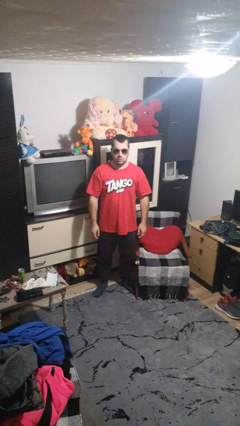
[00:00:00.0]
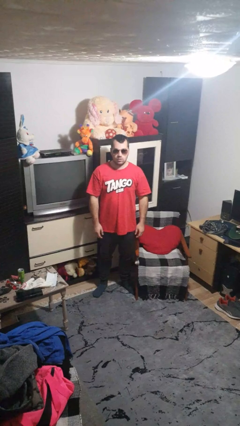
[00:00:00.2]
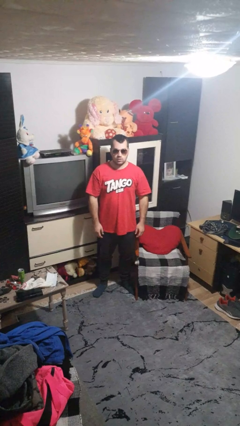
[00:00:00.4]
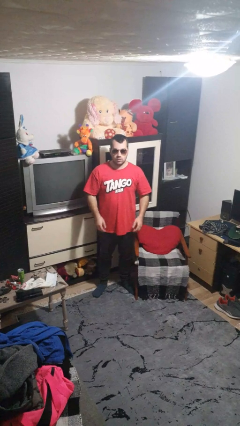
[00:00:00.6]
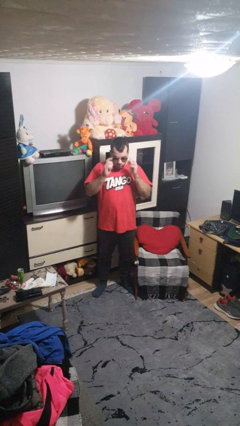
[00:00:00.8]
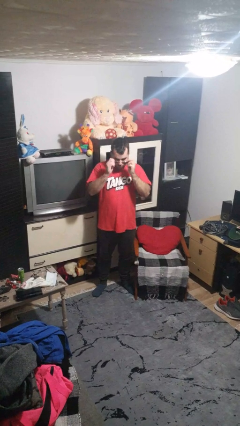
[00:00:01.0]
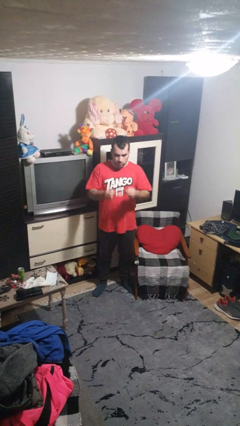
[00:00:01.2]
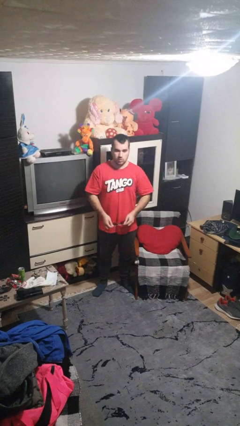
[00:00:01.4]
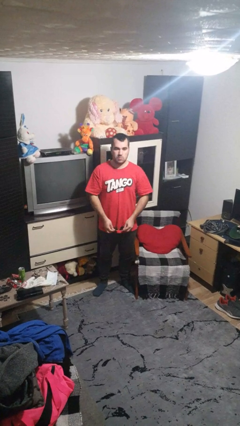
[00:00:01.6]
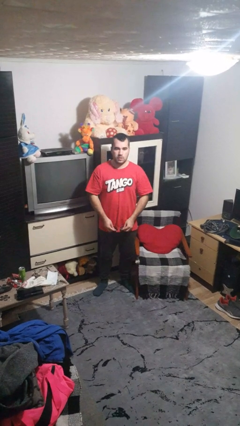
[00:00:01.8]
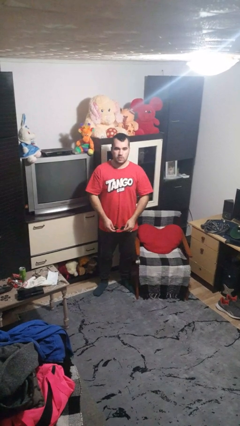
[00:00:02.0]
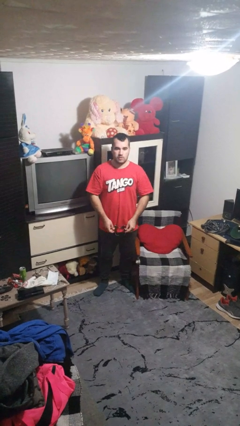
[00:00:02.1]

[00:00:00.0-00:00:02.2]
person takes off sunglasses

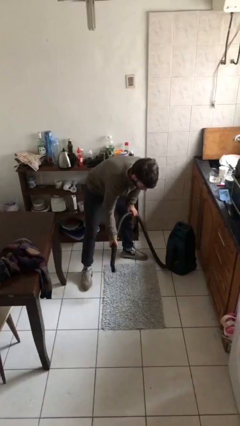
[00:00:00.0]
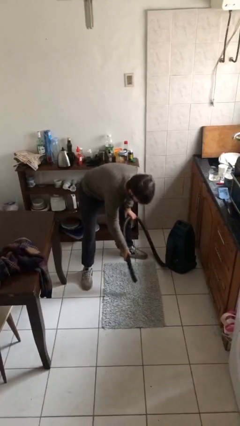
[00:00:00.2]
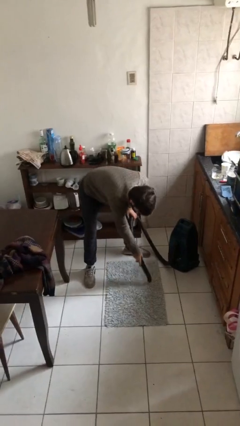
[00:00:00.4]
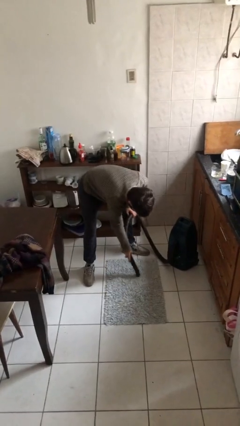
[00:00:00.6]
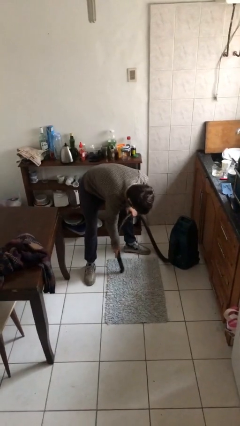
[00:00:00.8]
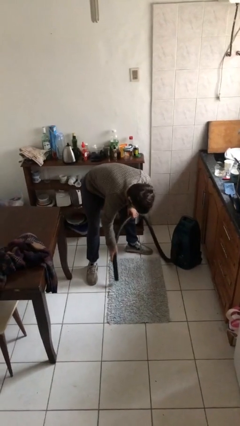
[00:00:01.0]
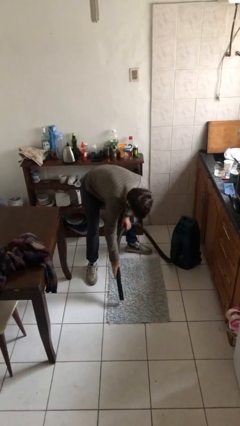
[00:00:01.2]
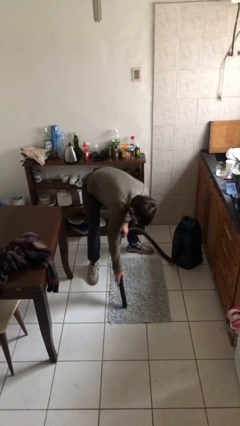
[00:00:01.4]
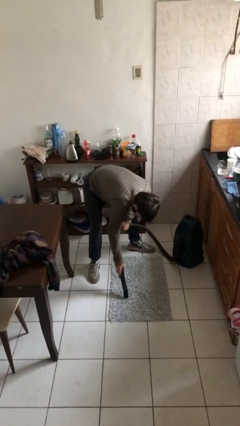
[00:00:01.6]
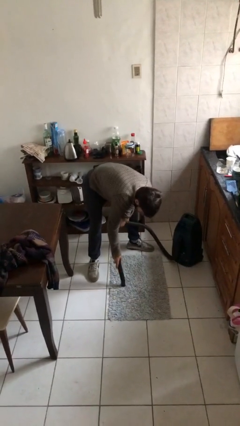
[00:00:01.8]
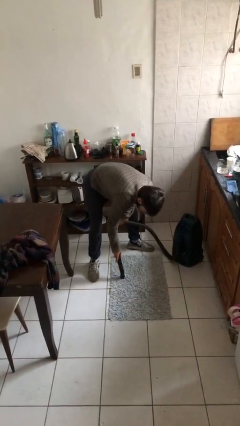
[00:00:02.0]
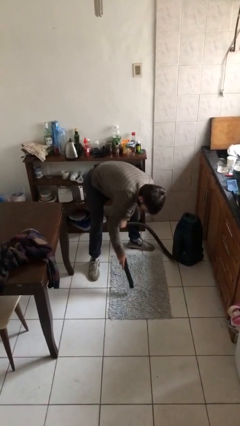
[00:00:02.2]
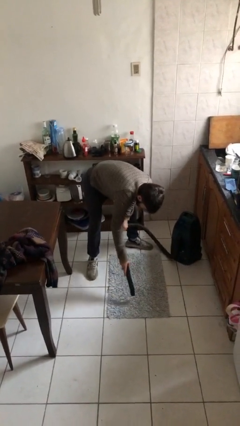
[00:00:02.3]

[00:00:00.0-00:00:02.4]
person vacuums carpet

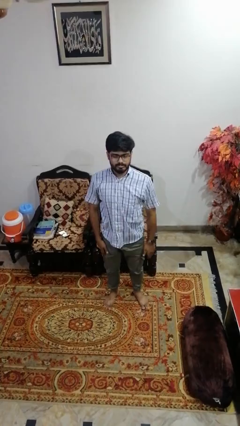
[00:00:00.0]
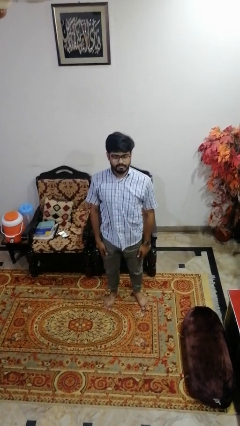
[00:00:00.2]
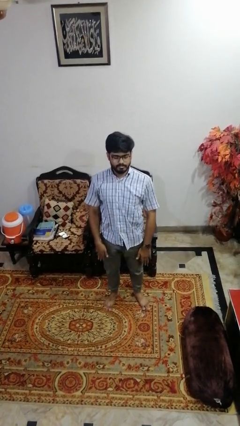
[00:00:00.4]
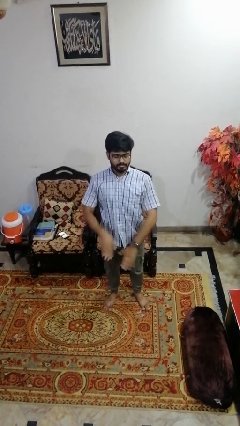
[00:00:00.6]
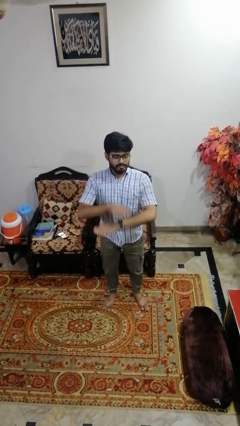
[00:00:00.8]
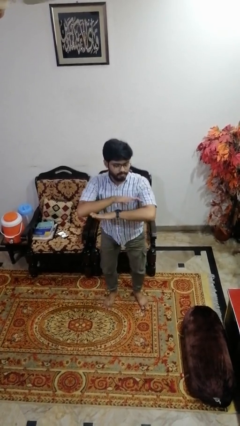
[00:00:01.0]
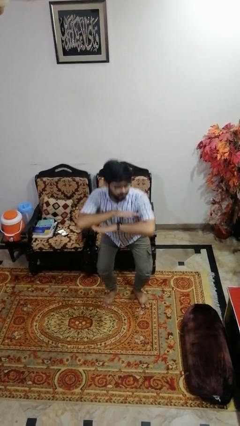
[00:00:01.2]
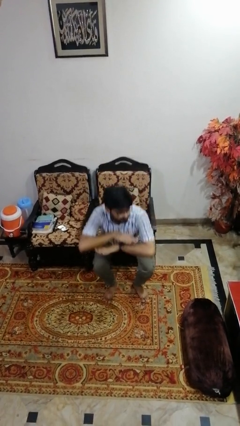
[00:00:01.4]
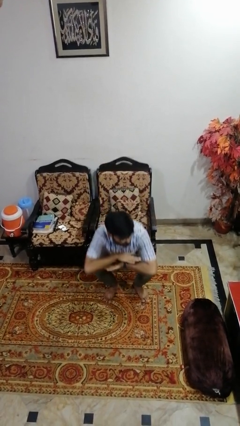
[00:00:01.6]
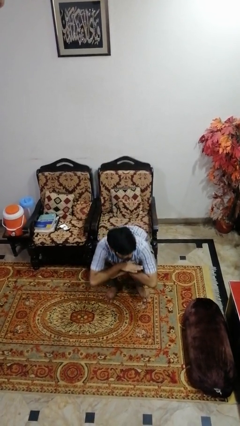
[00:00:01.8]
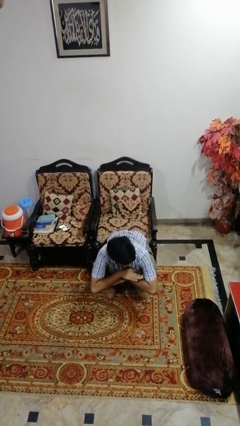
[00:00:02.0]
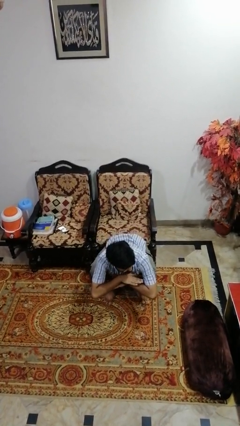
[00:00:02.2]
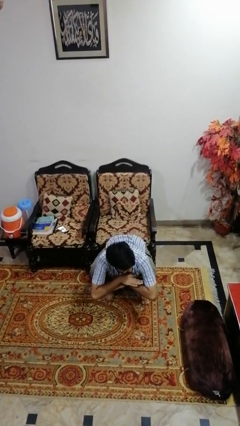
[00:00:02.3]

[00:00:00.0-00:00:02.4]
person squats

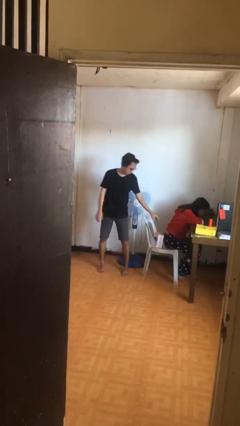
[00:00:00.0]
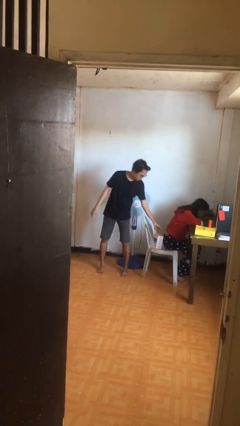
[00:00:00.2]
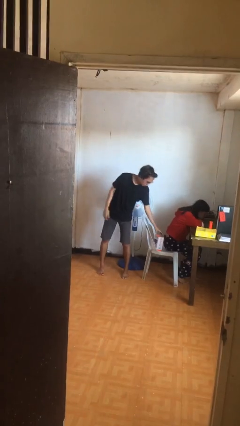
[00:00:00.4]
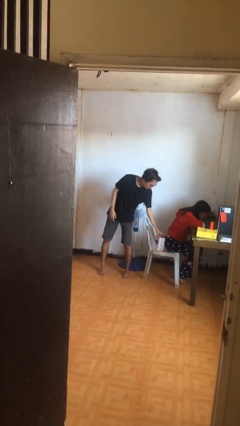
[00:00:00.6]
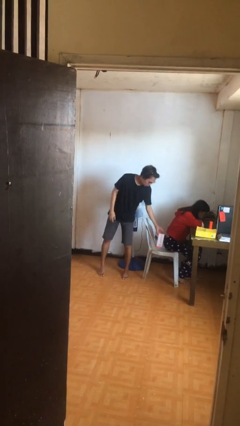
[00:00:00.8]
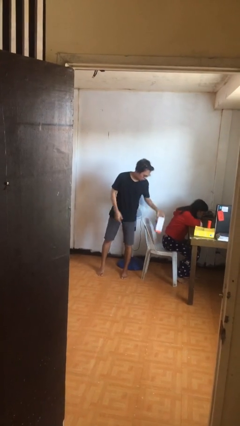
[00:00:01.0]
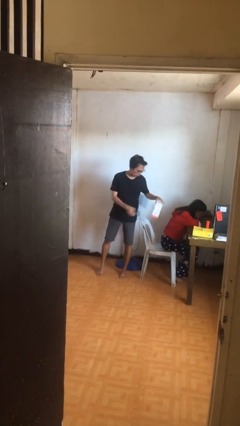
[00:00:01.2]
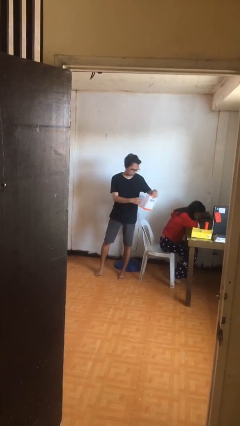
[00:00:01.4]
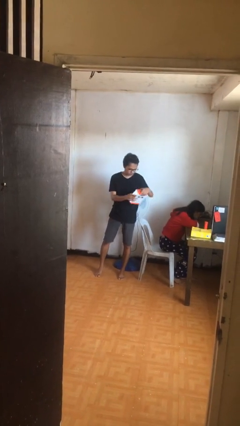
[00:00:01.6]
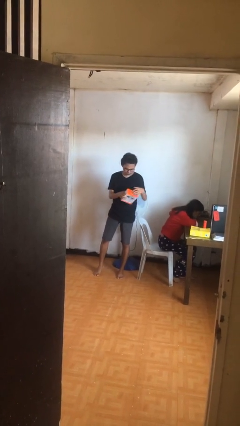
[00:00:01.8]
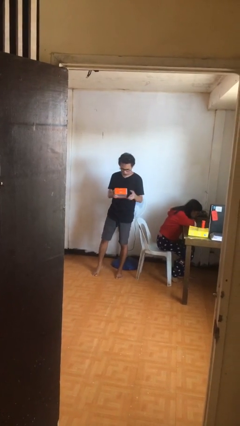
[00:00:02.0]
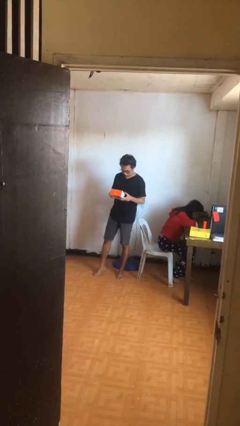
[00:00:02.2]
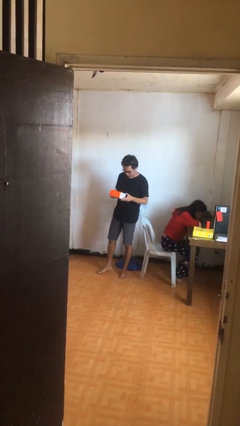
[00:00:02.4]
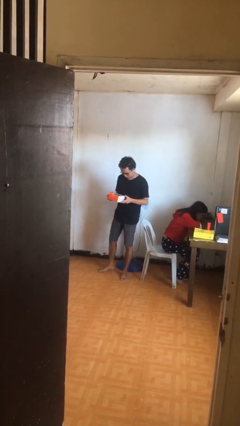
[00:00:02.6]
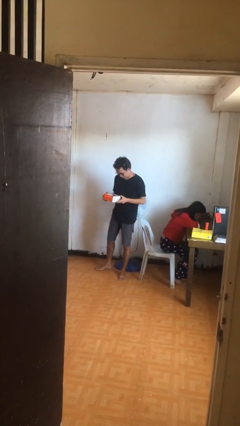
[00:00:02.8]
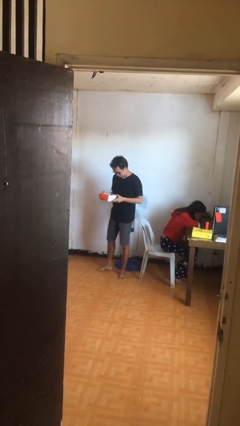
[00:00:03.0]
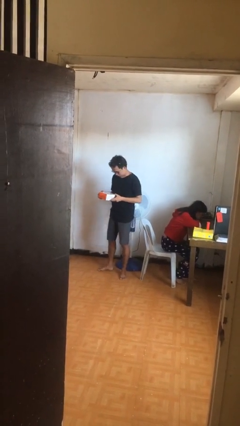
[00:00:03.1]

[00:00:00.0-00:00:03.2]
person steals object from person

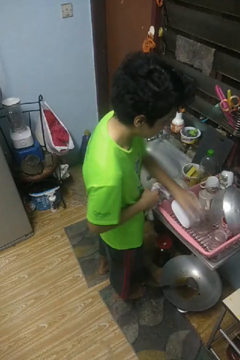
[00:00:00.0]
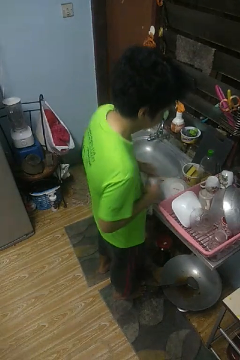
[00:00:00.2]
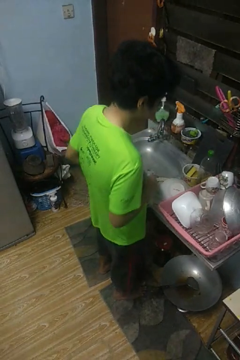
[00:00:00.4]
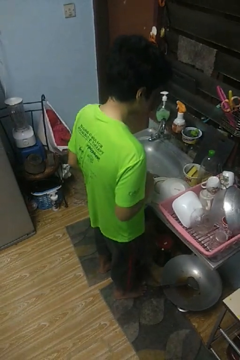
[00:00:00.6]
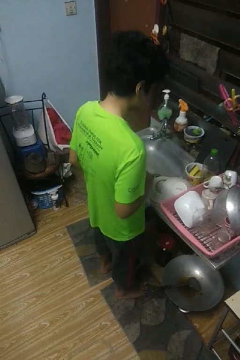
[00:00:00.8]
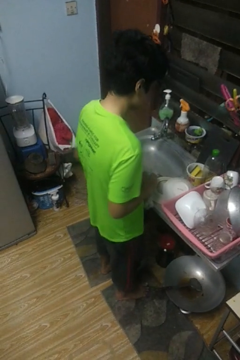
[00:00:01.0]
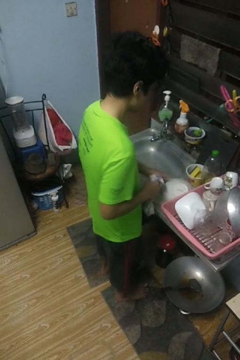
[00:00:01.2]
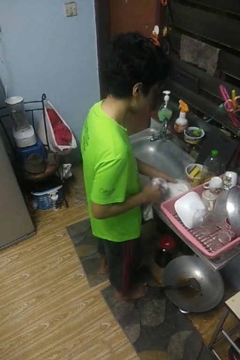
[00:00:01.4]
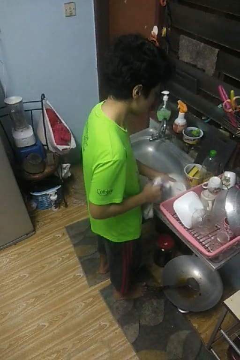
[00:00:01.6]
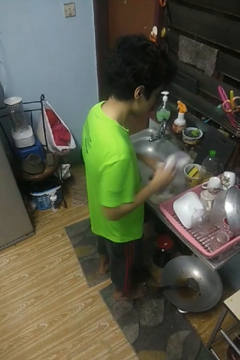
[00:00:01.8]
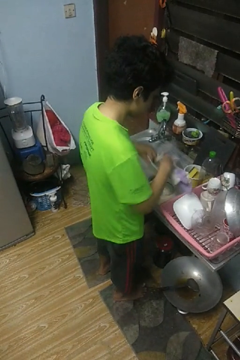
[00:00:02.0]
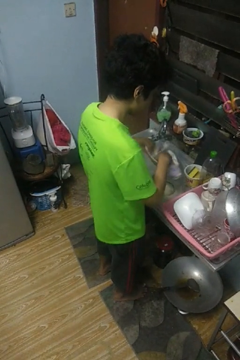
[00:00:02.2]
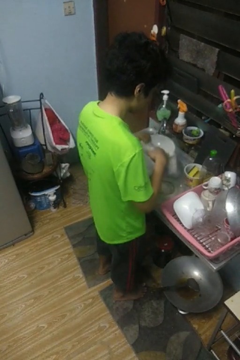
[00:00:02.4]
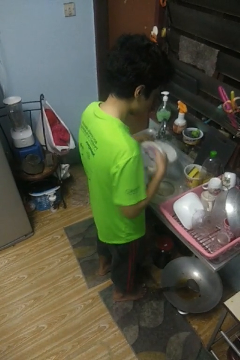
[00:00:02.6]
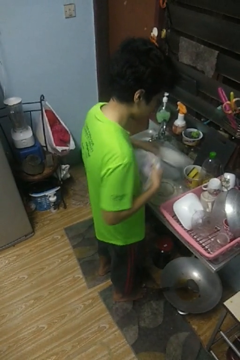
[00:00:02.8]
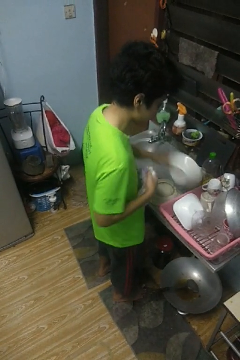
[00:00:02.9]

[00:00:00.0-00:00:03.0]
person dries dish

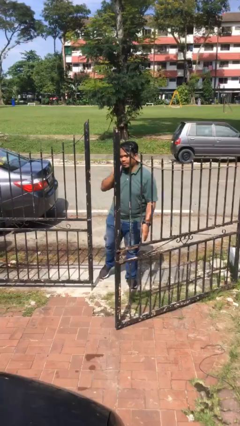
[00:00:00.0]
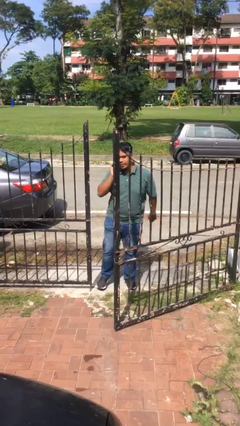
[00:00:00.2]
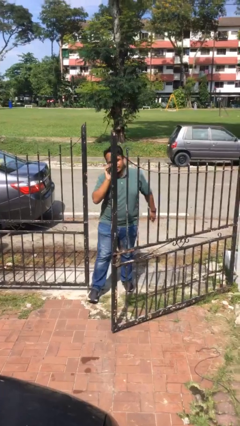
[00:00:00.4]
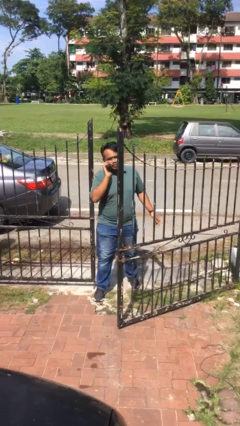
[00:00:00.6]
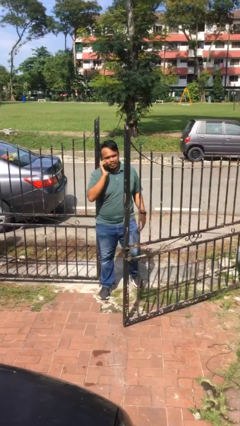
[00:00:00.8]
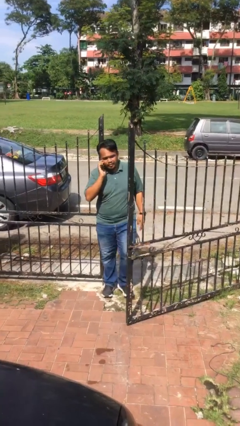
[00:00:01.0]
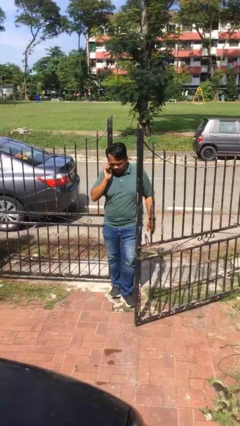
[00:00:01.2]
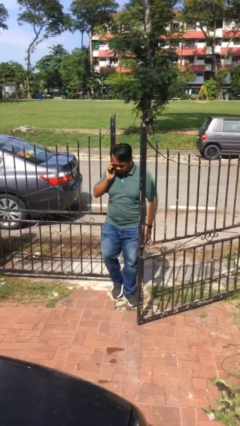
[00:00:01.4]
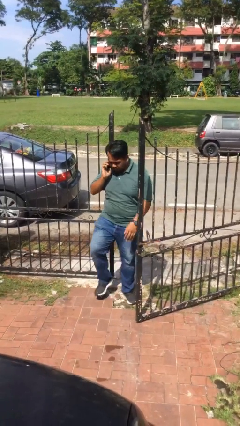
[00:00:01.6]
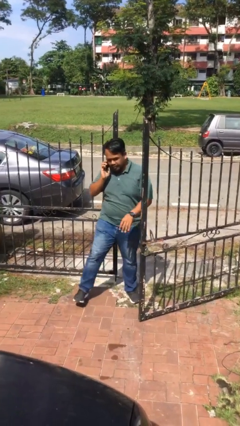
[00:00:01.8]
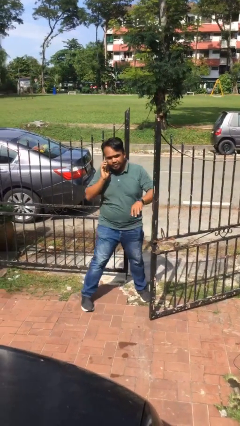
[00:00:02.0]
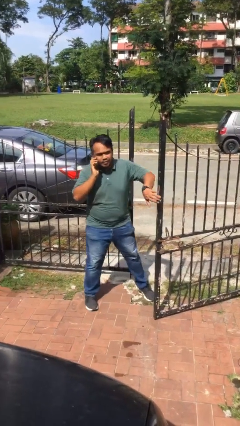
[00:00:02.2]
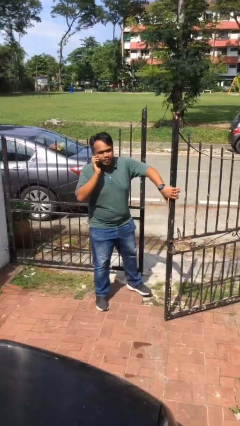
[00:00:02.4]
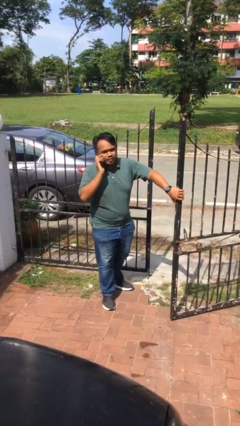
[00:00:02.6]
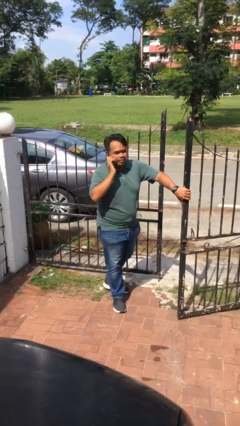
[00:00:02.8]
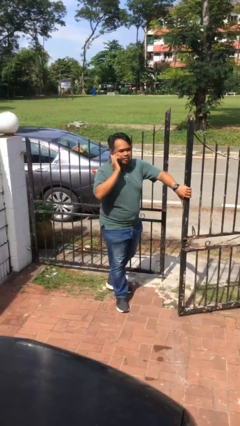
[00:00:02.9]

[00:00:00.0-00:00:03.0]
person enters scene through structure

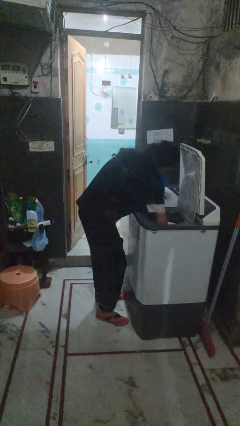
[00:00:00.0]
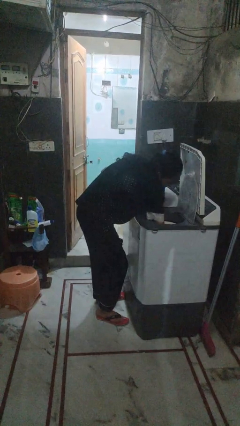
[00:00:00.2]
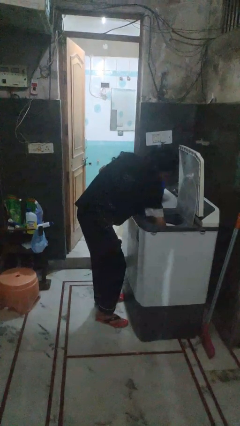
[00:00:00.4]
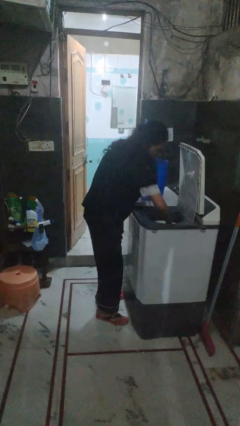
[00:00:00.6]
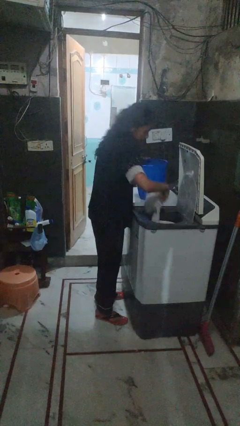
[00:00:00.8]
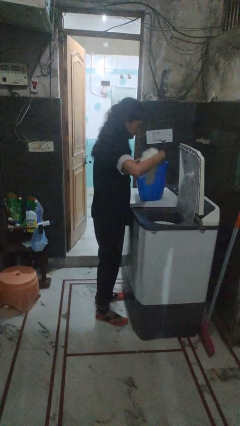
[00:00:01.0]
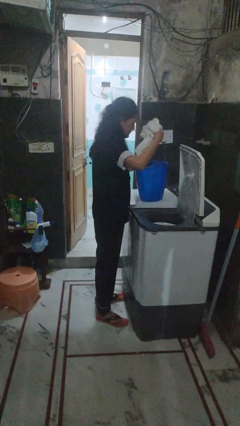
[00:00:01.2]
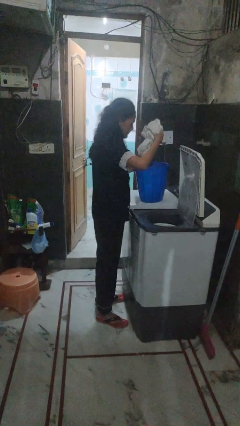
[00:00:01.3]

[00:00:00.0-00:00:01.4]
person unloads dryer
